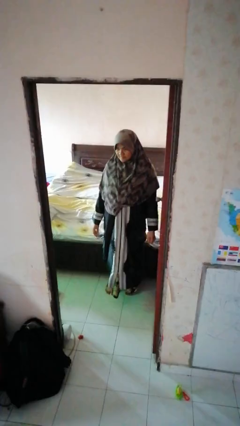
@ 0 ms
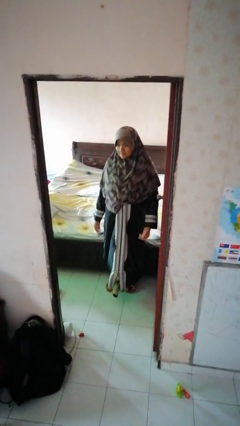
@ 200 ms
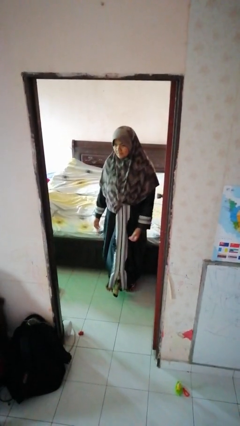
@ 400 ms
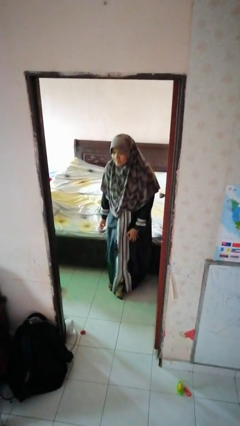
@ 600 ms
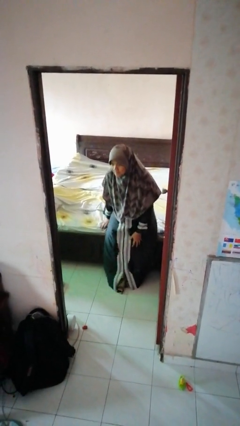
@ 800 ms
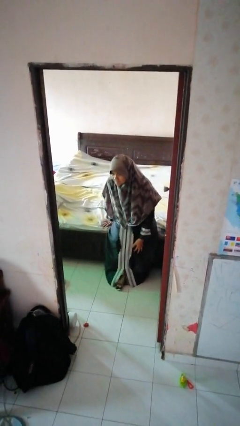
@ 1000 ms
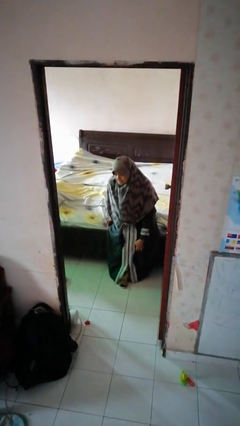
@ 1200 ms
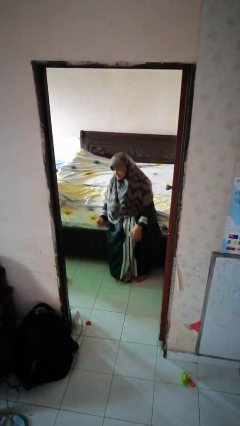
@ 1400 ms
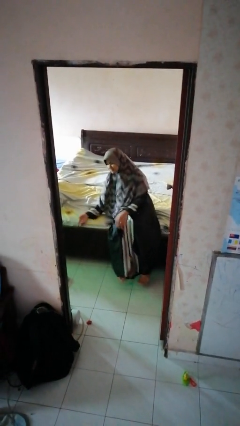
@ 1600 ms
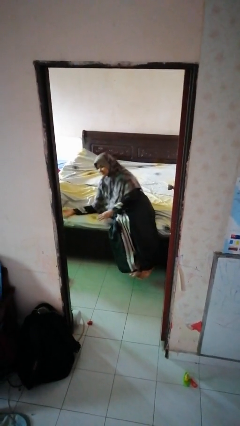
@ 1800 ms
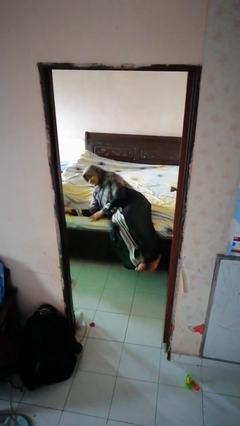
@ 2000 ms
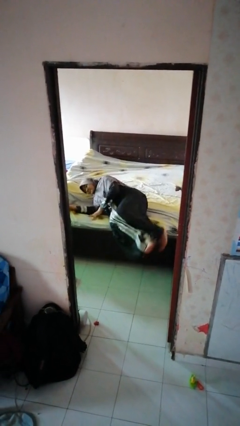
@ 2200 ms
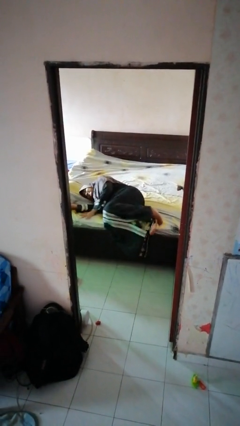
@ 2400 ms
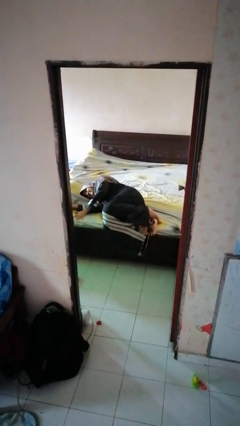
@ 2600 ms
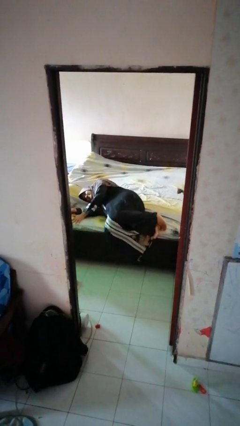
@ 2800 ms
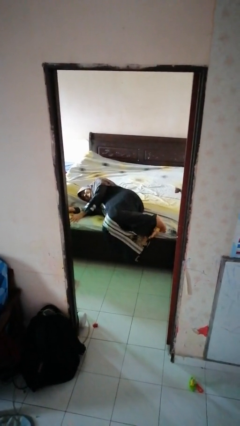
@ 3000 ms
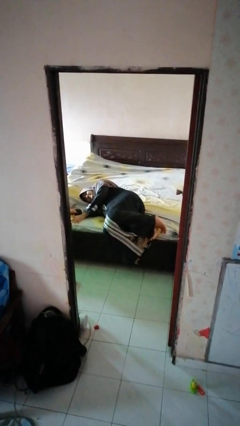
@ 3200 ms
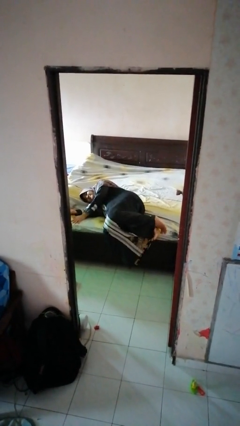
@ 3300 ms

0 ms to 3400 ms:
person lies down on bed

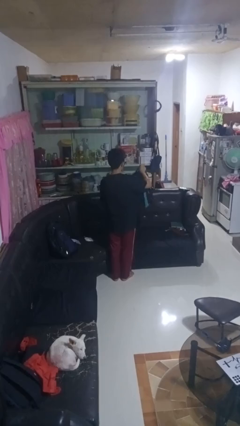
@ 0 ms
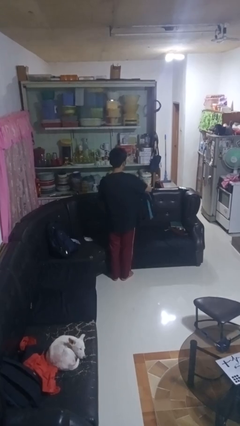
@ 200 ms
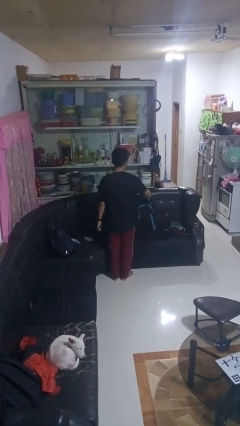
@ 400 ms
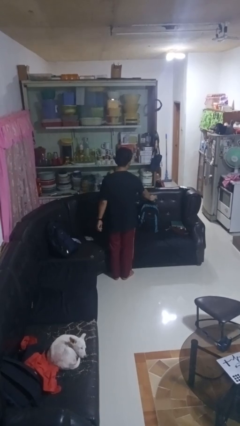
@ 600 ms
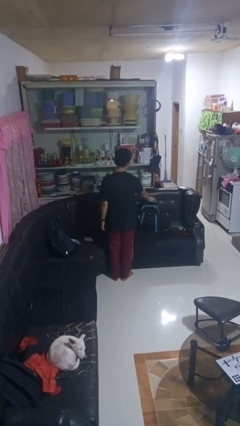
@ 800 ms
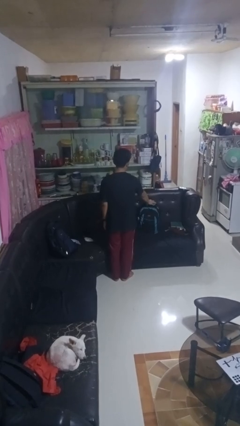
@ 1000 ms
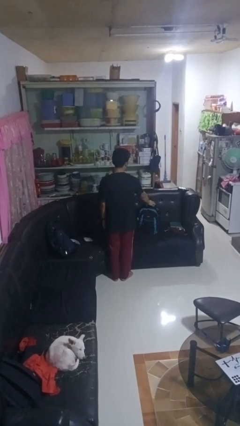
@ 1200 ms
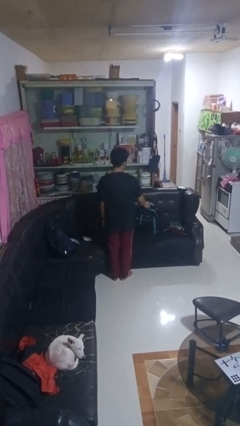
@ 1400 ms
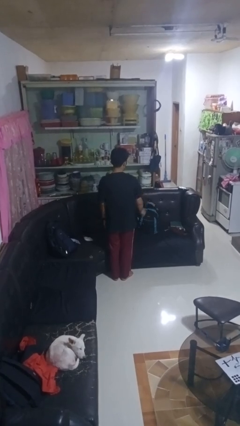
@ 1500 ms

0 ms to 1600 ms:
person puts down object on couch

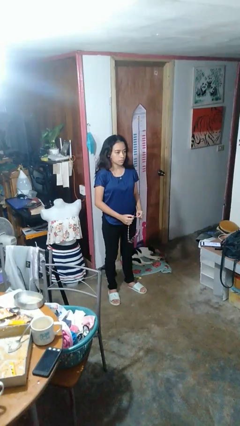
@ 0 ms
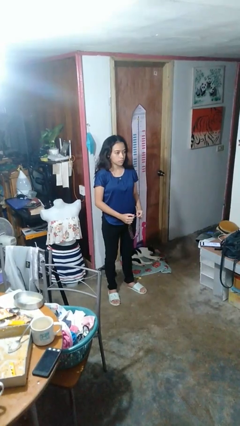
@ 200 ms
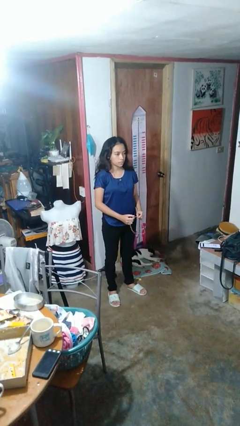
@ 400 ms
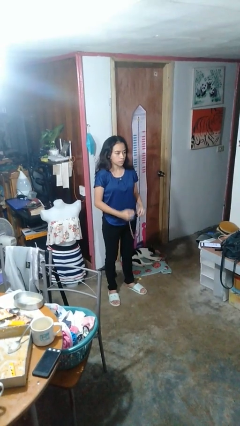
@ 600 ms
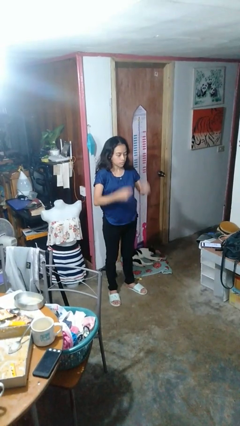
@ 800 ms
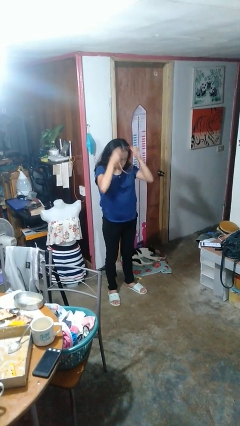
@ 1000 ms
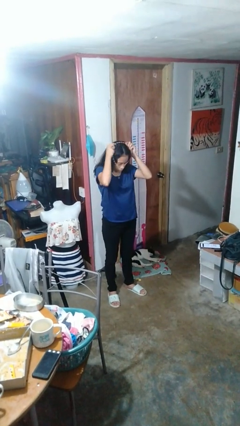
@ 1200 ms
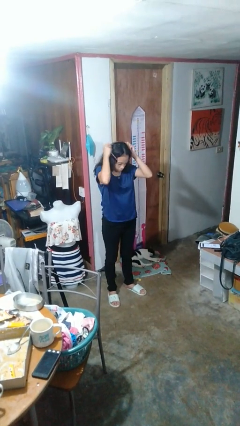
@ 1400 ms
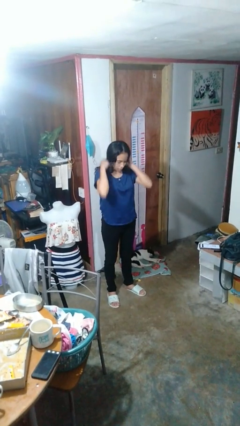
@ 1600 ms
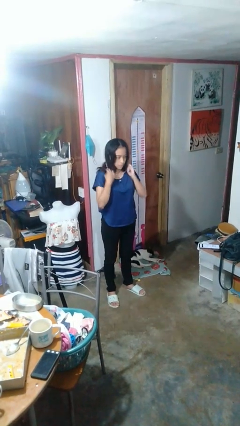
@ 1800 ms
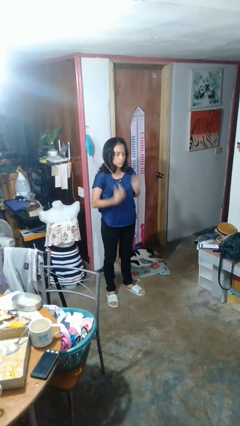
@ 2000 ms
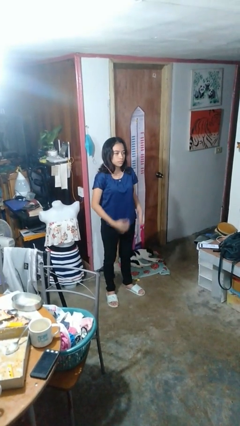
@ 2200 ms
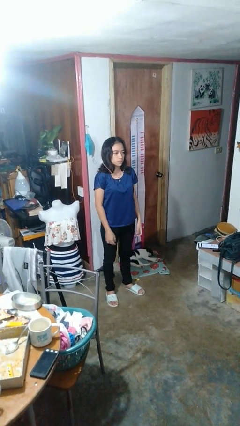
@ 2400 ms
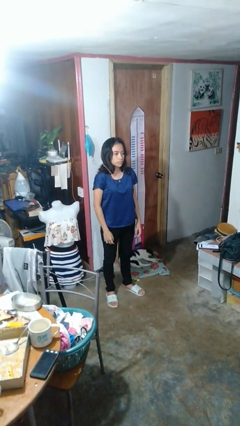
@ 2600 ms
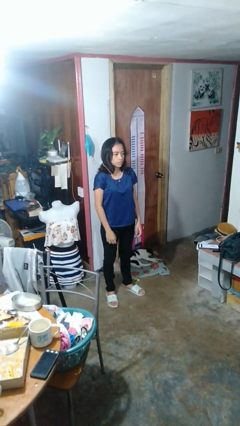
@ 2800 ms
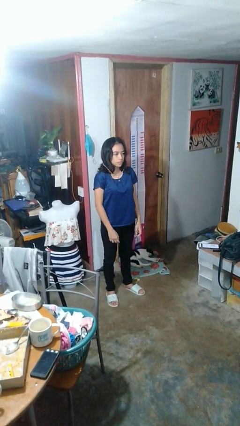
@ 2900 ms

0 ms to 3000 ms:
person puts on necklace

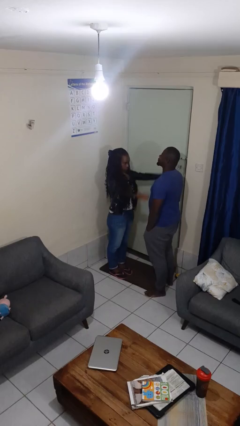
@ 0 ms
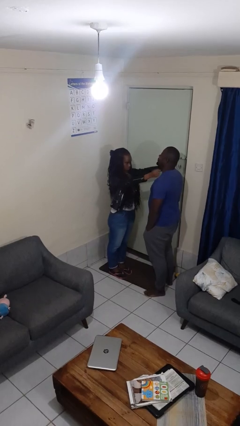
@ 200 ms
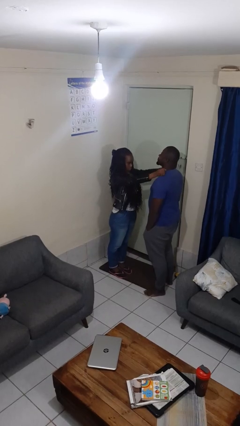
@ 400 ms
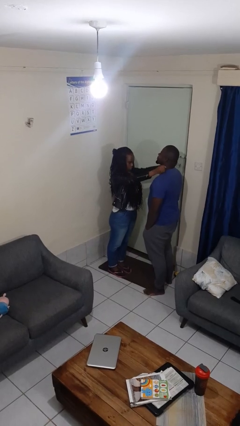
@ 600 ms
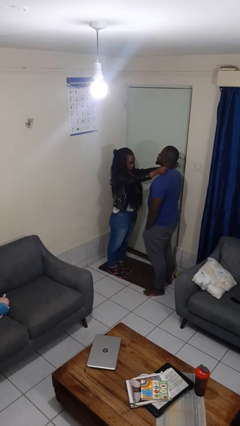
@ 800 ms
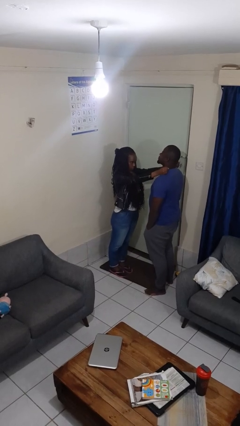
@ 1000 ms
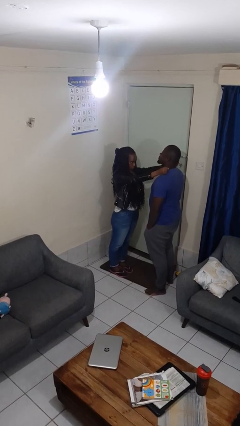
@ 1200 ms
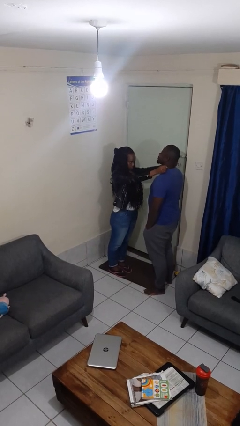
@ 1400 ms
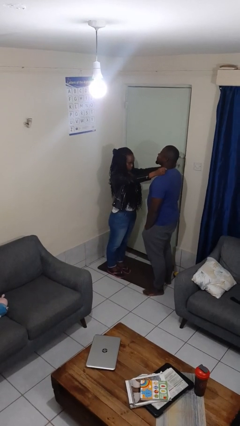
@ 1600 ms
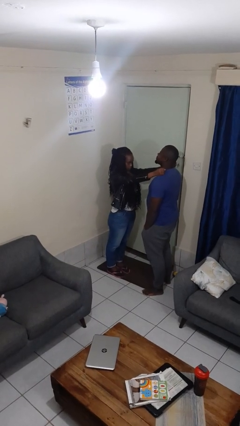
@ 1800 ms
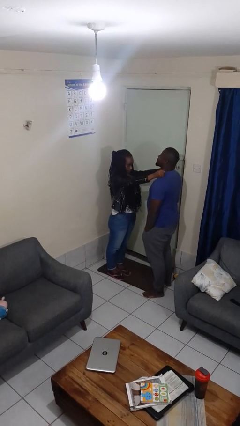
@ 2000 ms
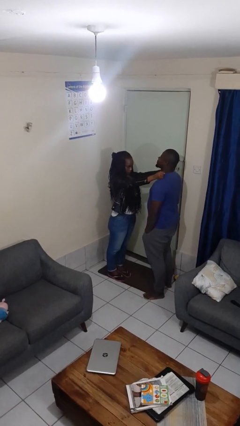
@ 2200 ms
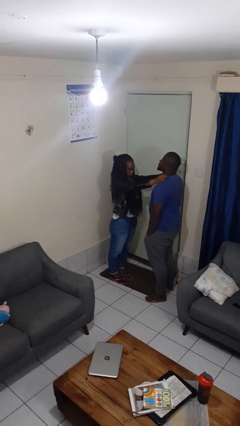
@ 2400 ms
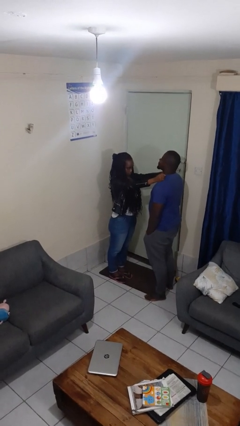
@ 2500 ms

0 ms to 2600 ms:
person pounds shoulders of person

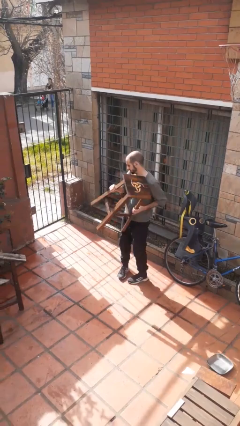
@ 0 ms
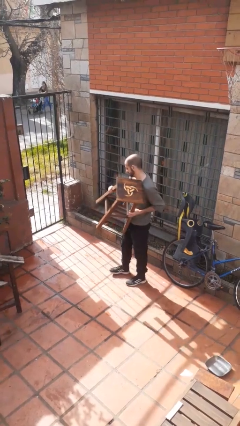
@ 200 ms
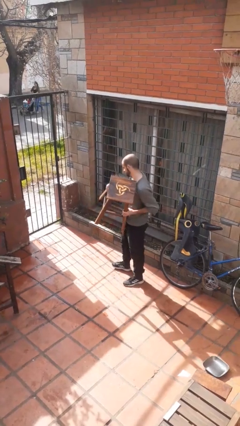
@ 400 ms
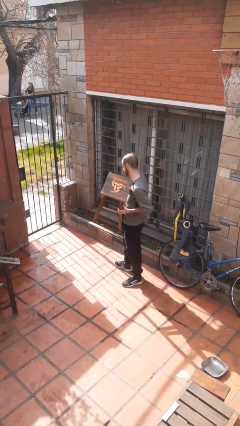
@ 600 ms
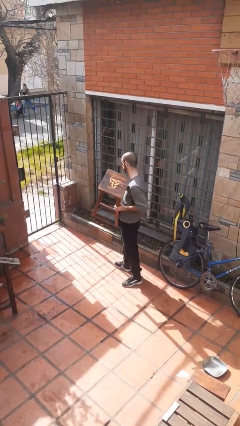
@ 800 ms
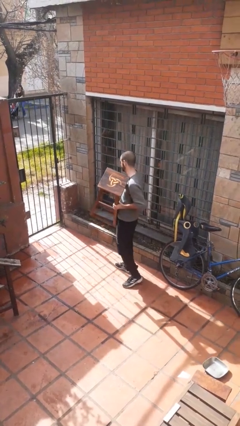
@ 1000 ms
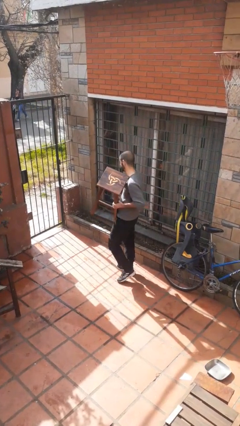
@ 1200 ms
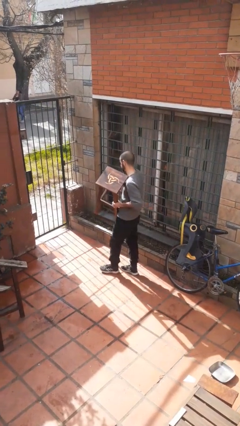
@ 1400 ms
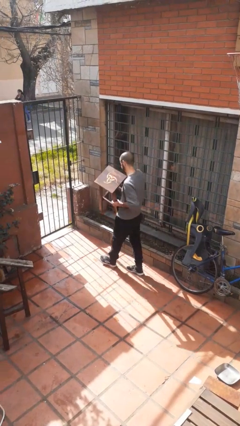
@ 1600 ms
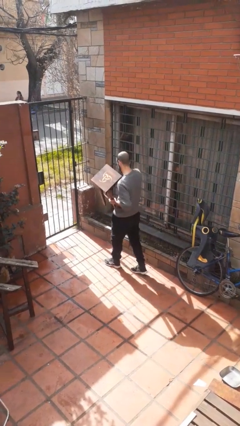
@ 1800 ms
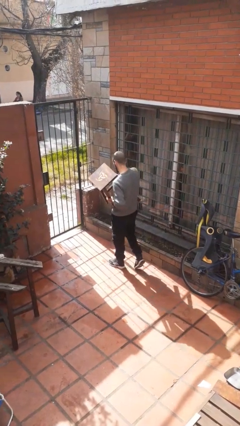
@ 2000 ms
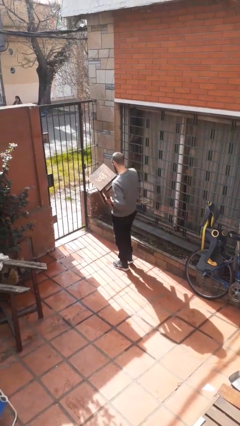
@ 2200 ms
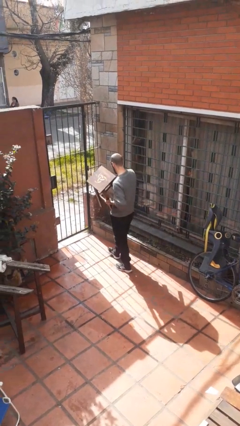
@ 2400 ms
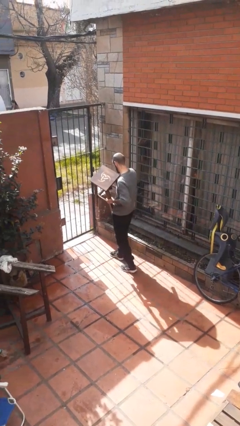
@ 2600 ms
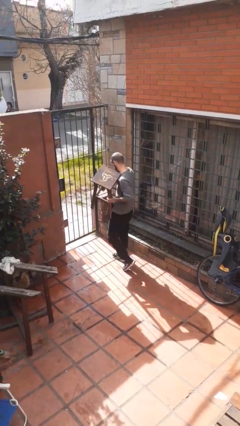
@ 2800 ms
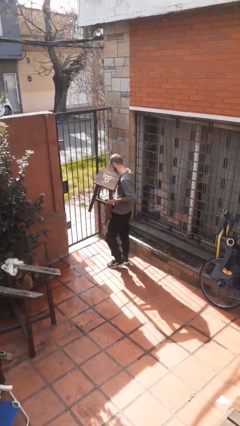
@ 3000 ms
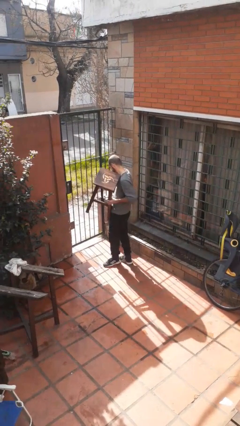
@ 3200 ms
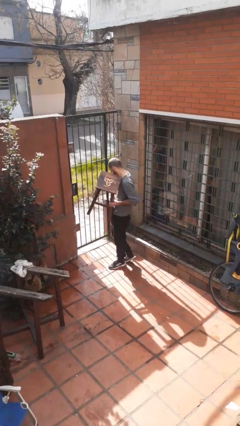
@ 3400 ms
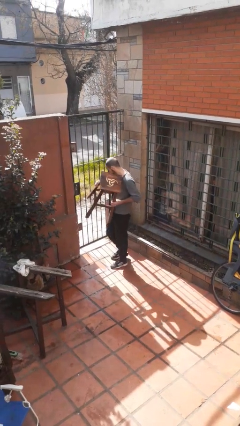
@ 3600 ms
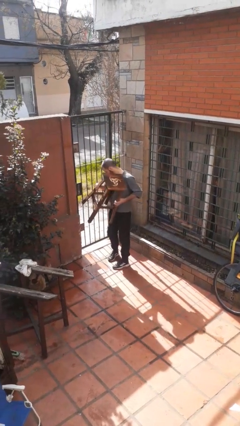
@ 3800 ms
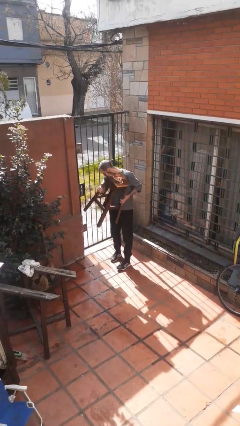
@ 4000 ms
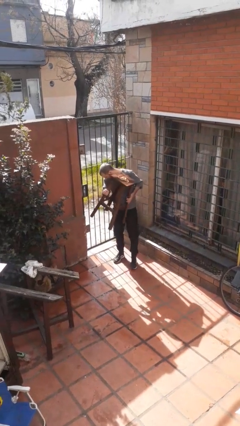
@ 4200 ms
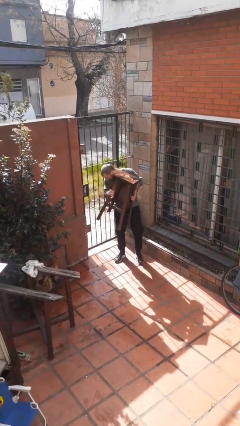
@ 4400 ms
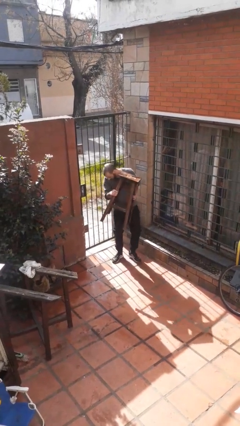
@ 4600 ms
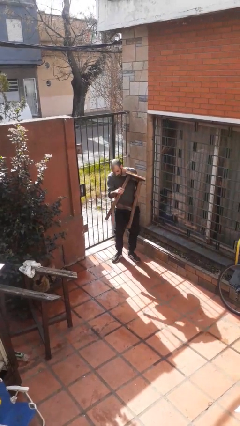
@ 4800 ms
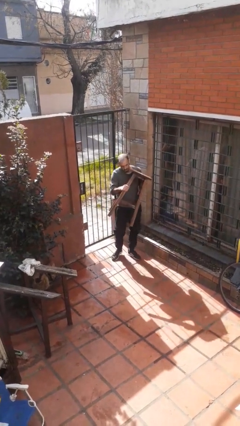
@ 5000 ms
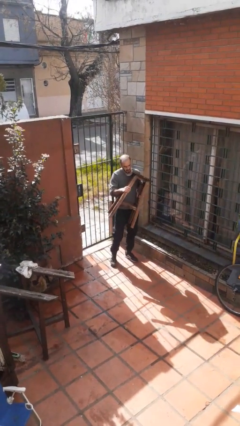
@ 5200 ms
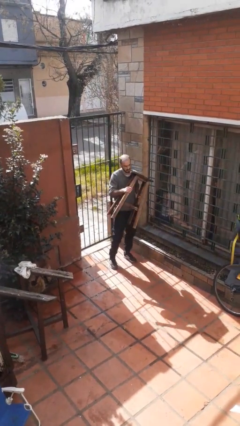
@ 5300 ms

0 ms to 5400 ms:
person carries furniture

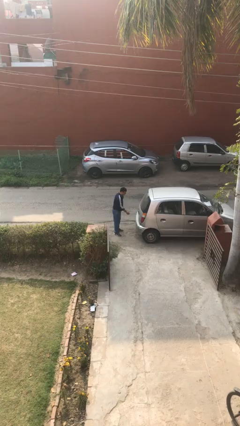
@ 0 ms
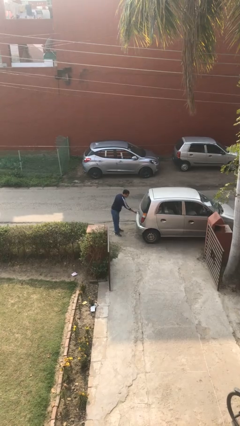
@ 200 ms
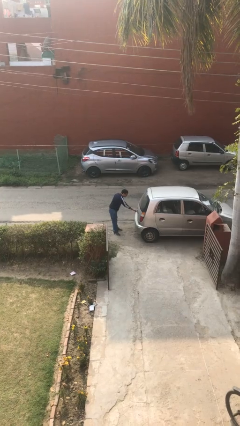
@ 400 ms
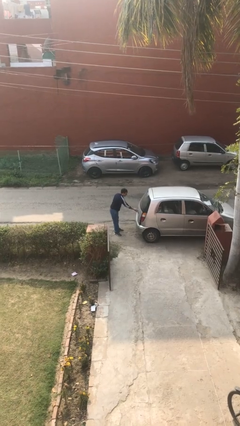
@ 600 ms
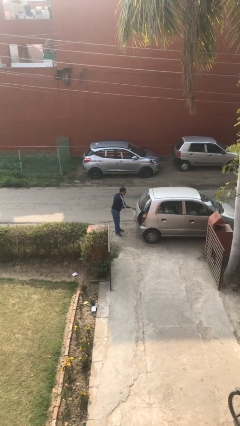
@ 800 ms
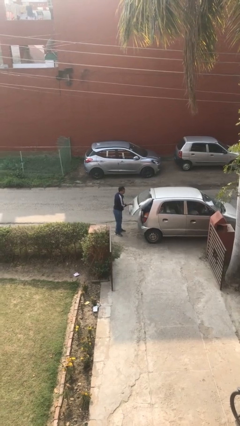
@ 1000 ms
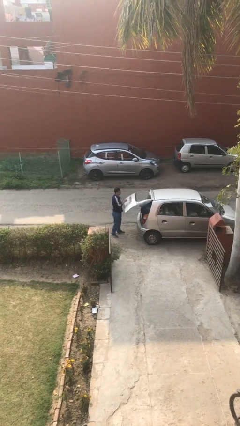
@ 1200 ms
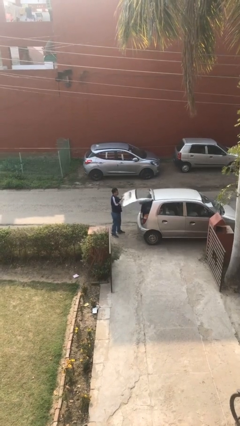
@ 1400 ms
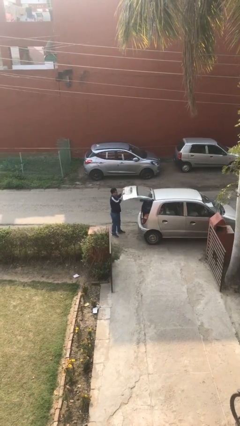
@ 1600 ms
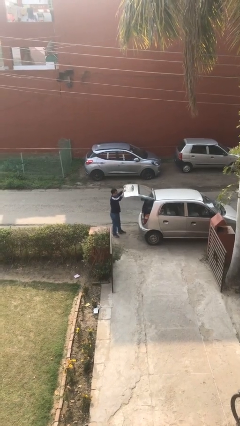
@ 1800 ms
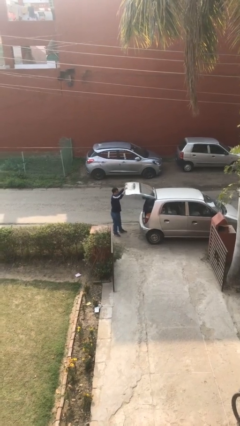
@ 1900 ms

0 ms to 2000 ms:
person opens car trunk
